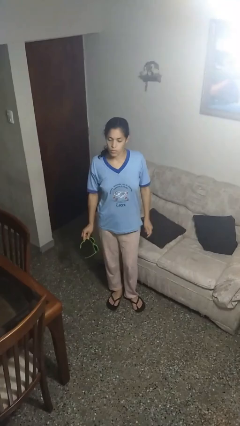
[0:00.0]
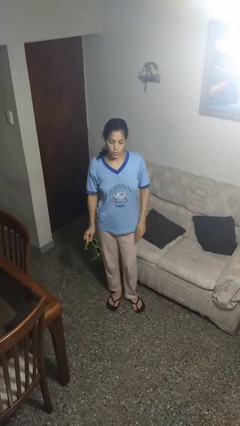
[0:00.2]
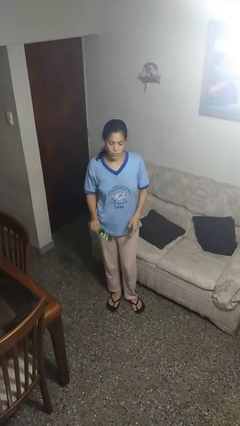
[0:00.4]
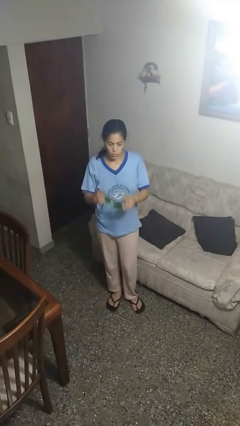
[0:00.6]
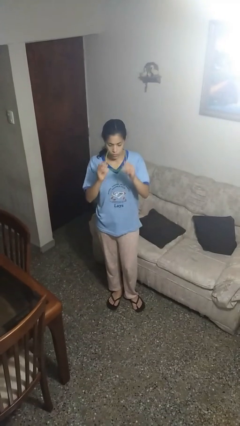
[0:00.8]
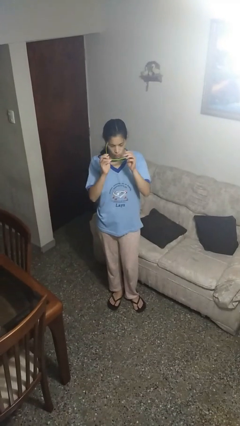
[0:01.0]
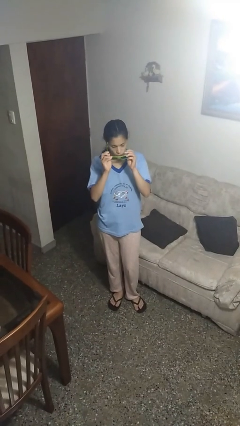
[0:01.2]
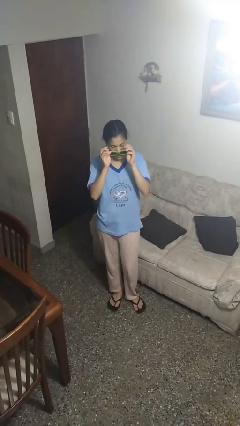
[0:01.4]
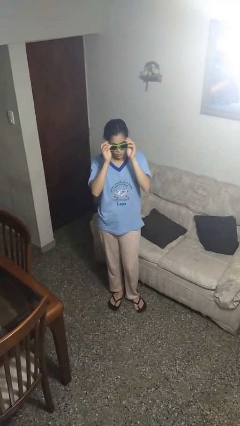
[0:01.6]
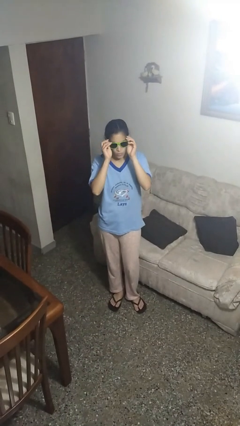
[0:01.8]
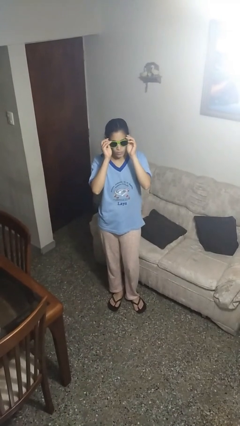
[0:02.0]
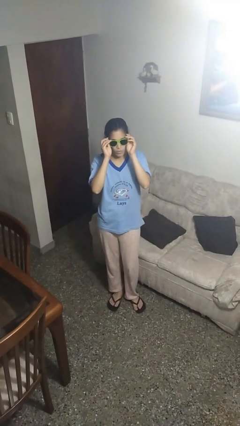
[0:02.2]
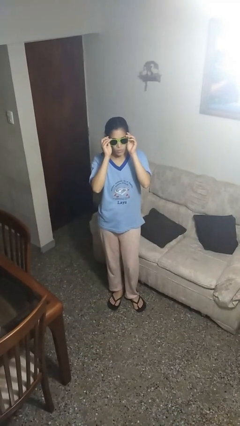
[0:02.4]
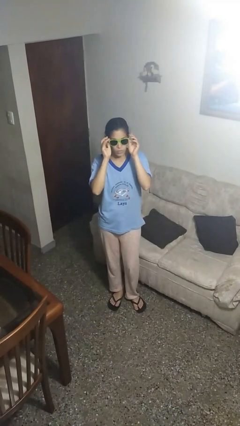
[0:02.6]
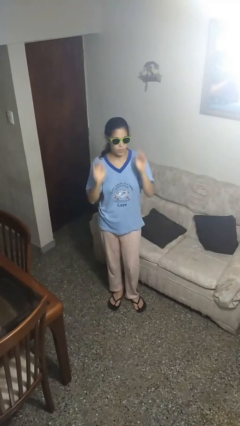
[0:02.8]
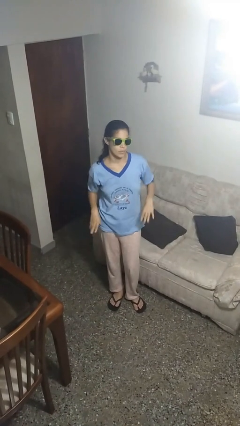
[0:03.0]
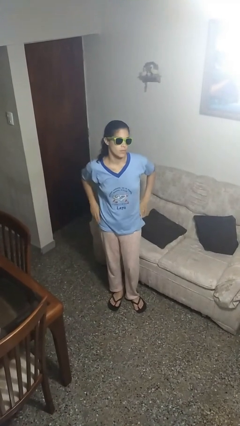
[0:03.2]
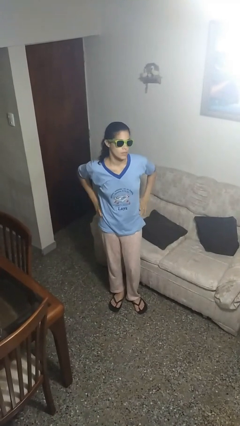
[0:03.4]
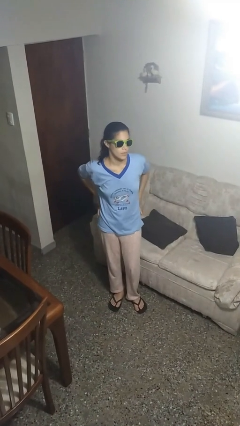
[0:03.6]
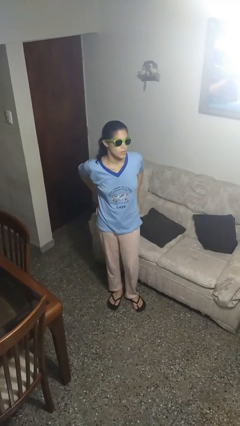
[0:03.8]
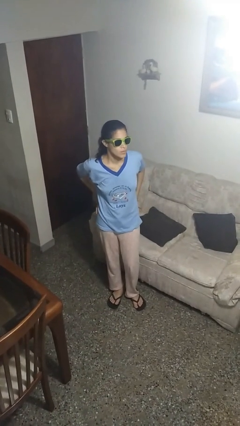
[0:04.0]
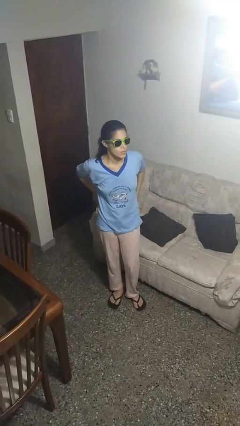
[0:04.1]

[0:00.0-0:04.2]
person puts on sunglasses

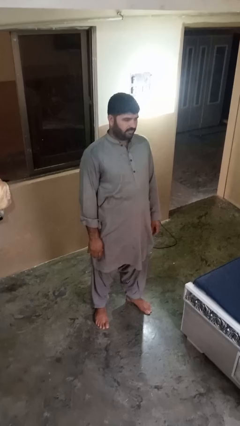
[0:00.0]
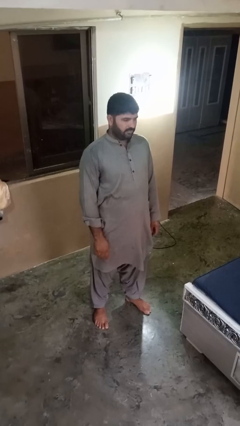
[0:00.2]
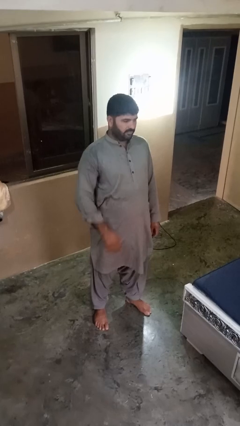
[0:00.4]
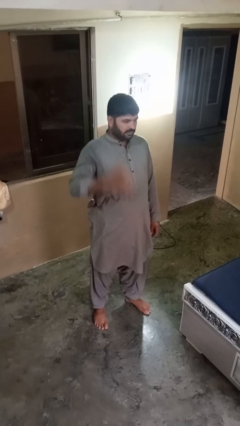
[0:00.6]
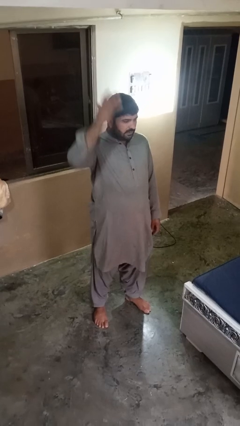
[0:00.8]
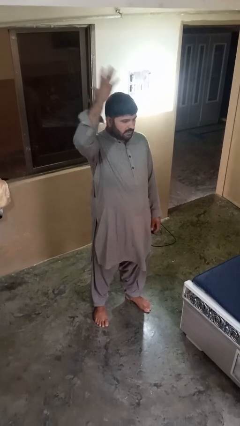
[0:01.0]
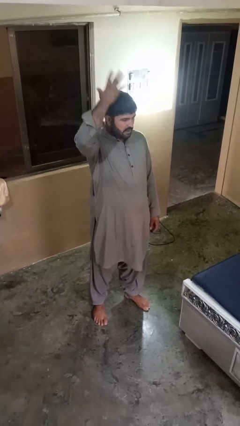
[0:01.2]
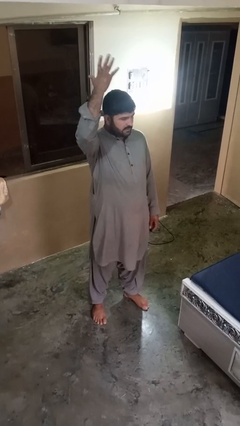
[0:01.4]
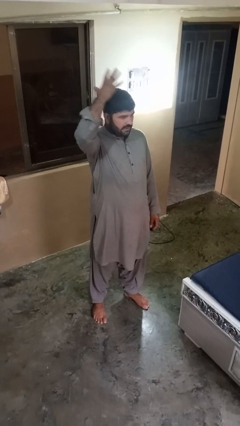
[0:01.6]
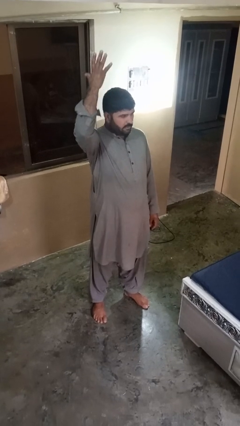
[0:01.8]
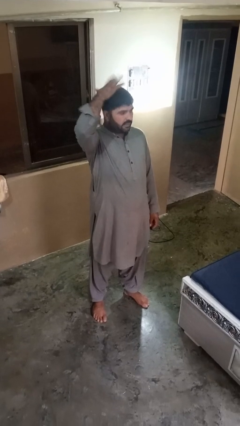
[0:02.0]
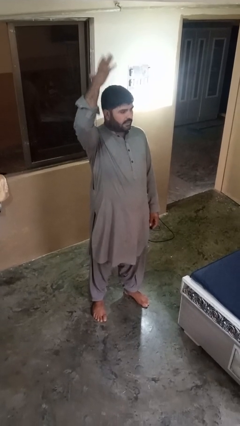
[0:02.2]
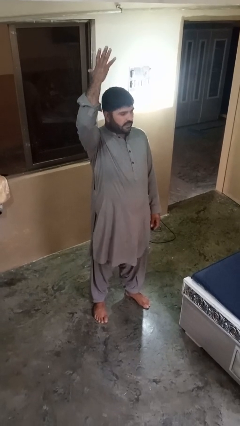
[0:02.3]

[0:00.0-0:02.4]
person pats head

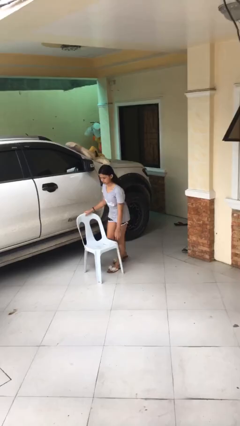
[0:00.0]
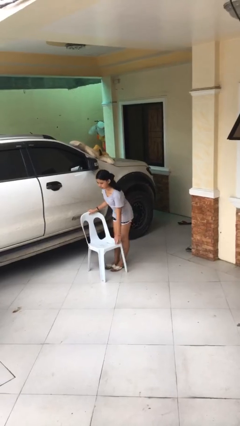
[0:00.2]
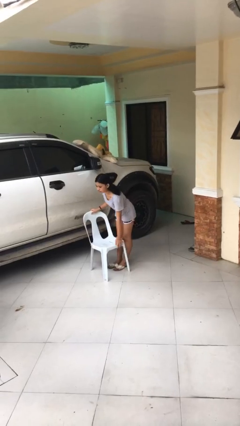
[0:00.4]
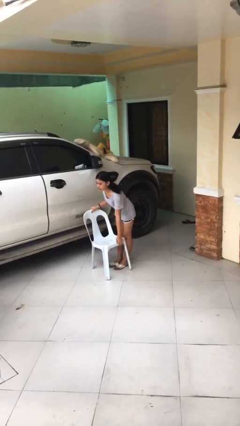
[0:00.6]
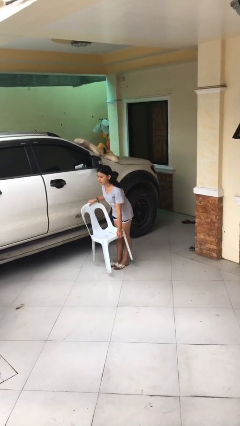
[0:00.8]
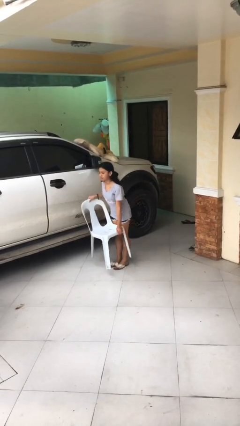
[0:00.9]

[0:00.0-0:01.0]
person picks up object from floor

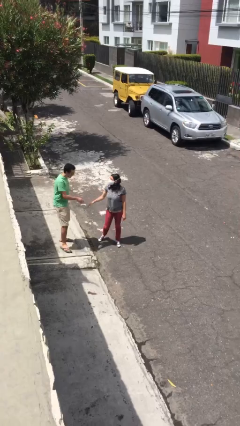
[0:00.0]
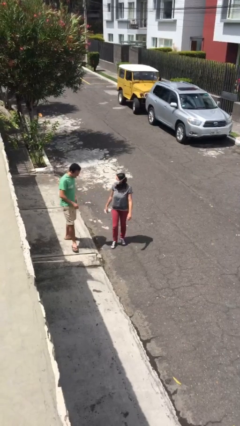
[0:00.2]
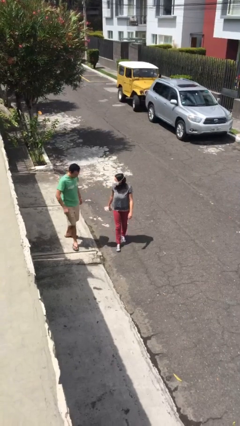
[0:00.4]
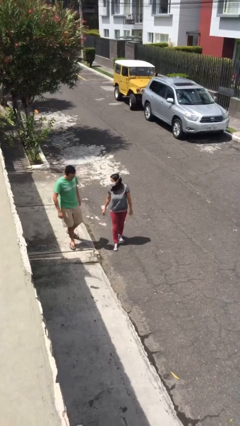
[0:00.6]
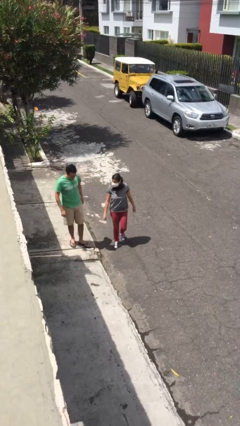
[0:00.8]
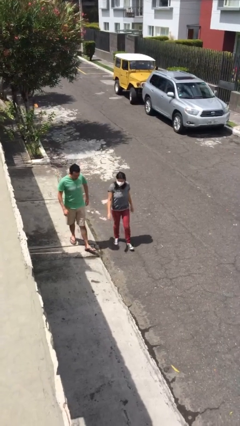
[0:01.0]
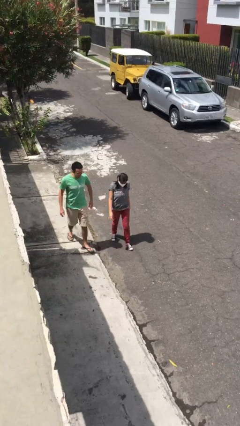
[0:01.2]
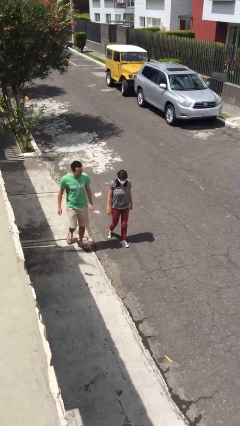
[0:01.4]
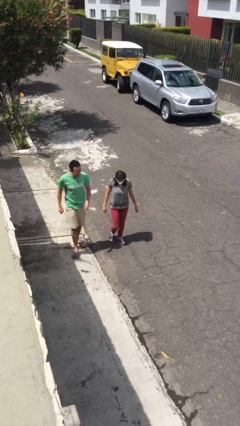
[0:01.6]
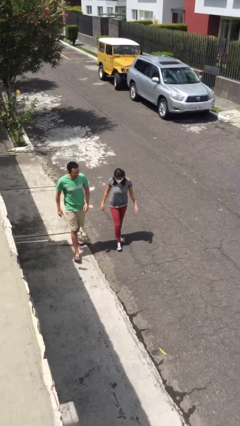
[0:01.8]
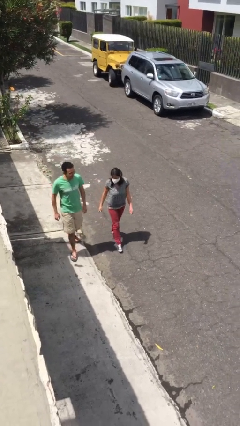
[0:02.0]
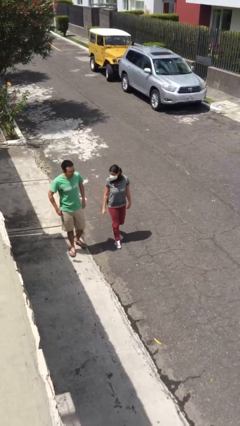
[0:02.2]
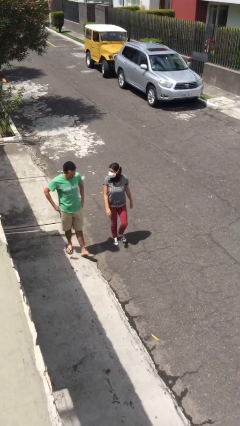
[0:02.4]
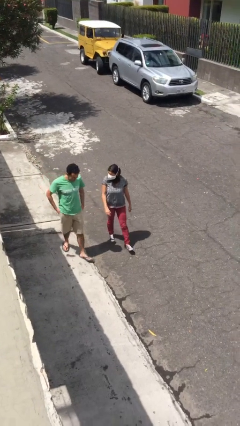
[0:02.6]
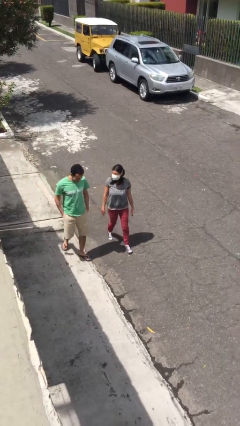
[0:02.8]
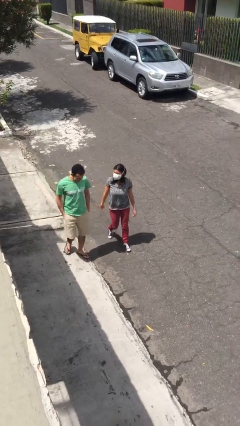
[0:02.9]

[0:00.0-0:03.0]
person talks to person

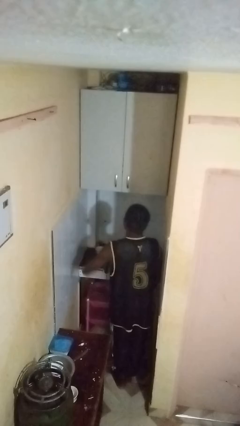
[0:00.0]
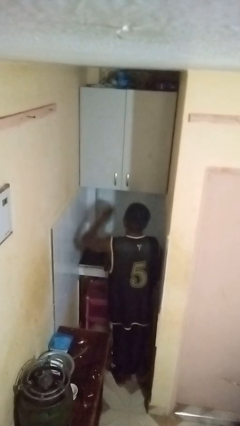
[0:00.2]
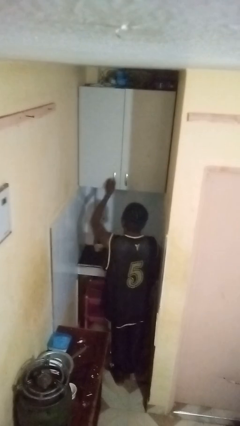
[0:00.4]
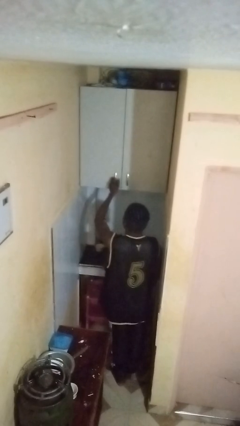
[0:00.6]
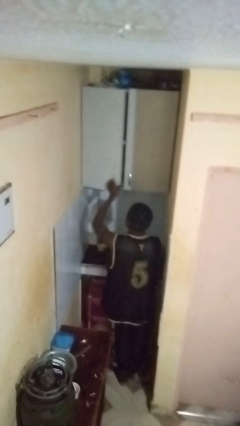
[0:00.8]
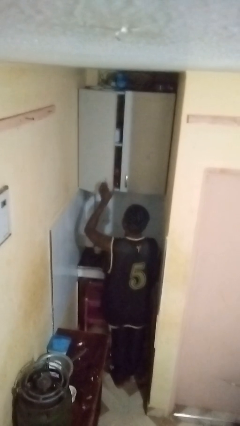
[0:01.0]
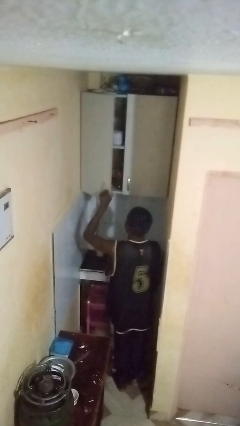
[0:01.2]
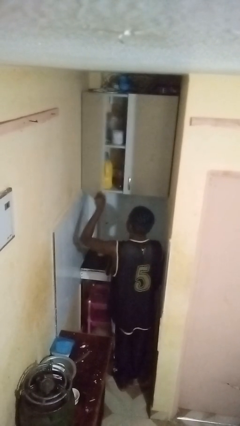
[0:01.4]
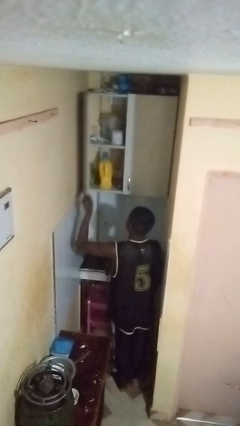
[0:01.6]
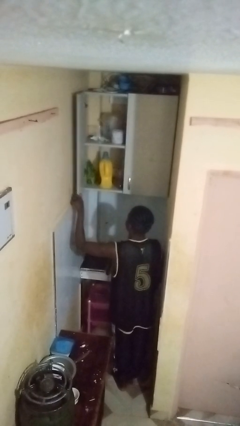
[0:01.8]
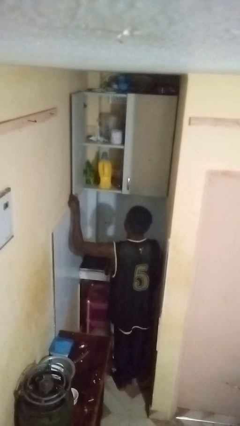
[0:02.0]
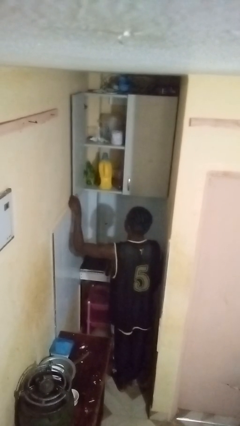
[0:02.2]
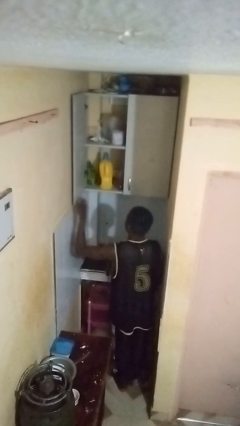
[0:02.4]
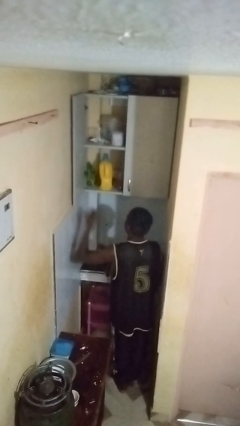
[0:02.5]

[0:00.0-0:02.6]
person opens cabinet

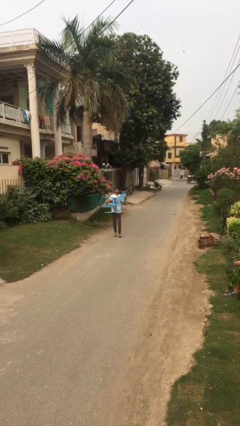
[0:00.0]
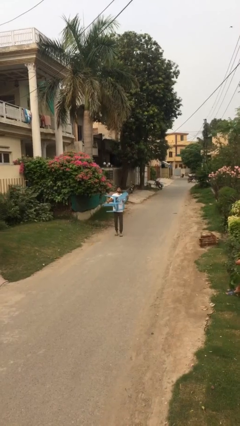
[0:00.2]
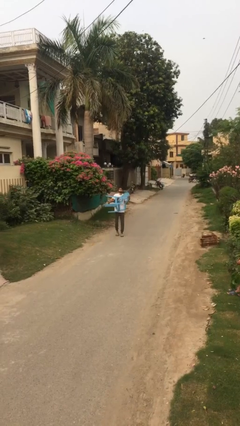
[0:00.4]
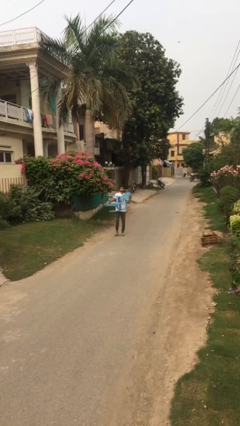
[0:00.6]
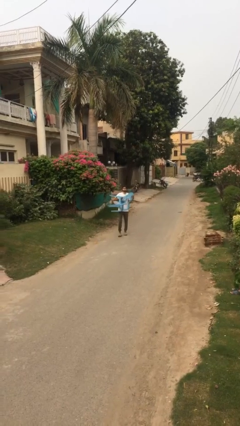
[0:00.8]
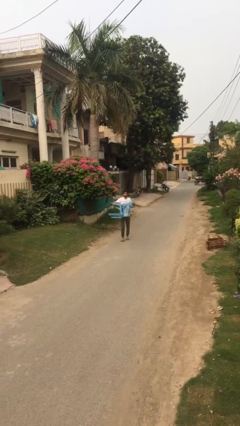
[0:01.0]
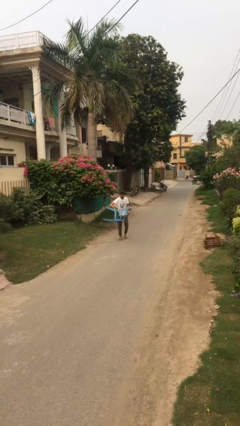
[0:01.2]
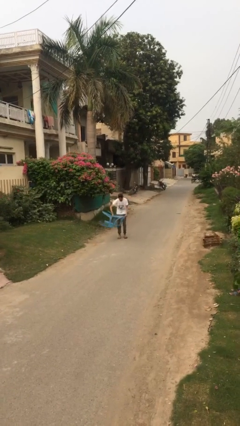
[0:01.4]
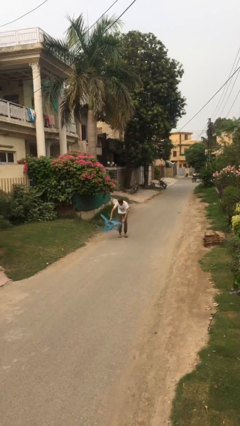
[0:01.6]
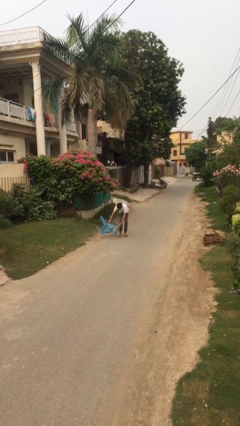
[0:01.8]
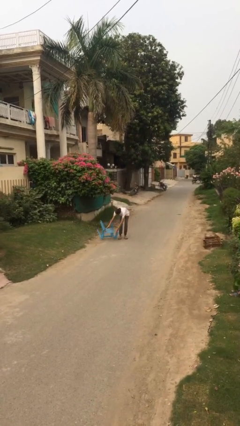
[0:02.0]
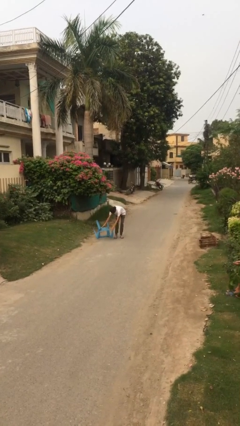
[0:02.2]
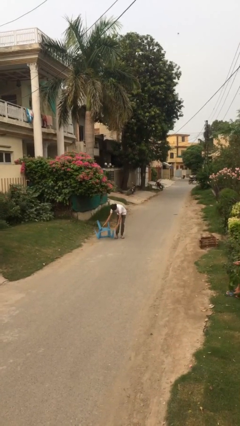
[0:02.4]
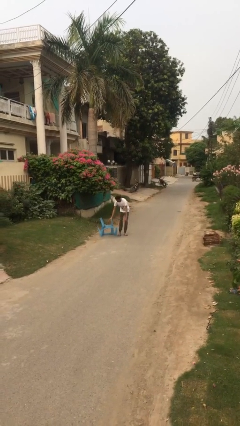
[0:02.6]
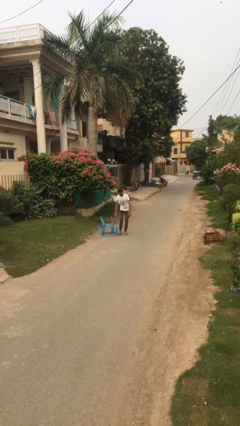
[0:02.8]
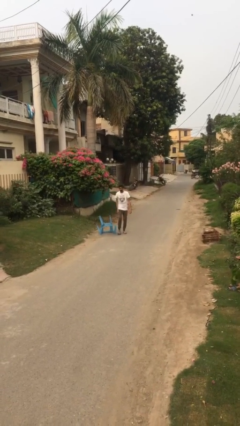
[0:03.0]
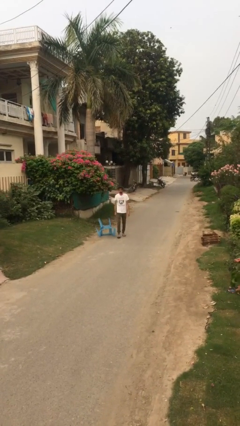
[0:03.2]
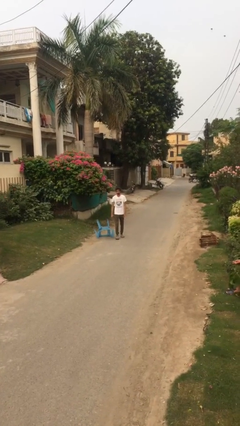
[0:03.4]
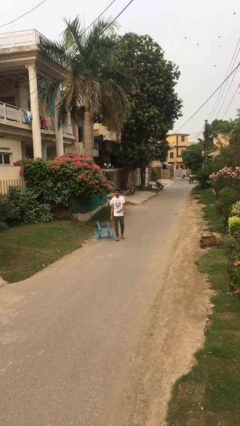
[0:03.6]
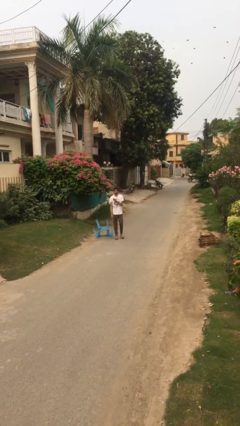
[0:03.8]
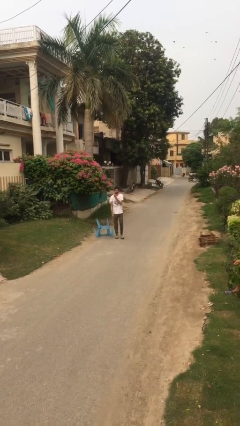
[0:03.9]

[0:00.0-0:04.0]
person puts down object on floor

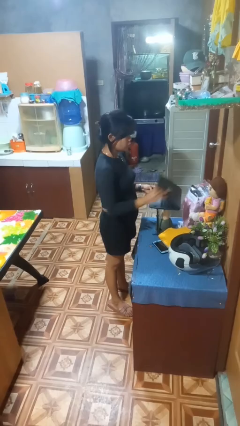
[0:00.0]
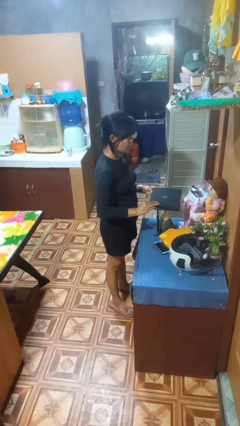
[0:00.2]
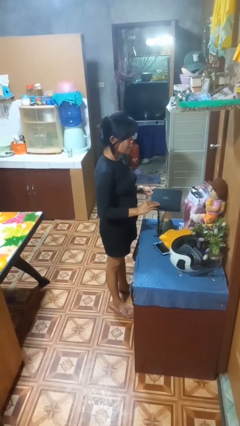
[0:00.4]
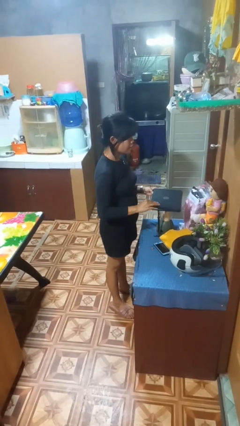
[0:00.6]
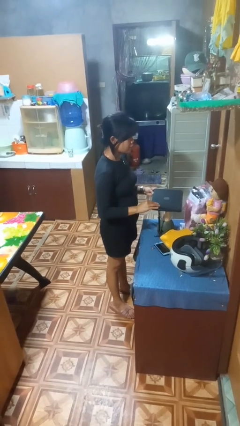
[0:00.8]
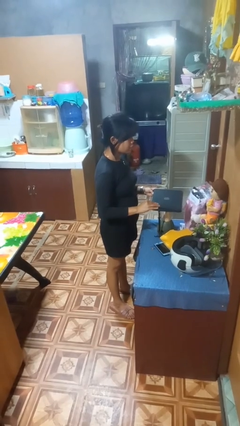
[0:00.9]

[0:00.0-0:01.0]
person closes laptop
